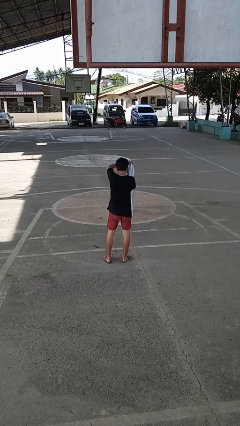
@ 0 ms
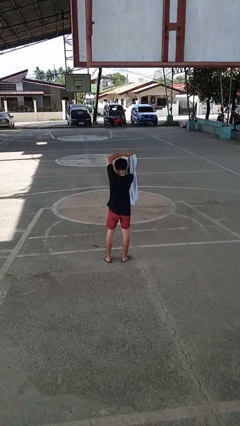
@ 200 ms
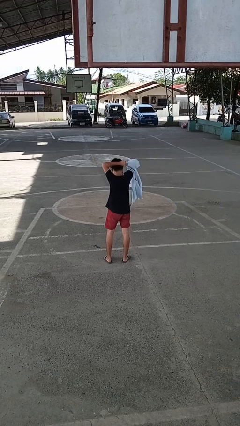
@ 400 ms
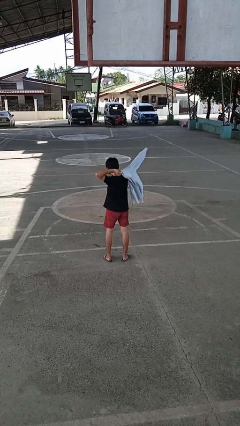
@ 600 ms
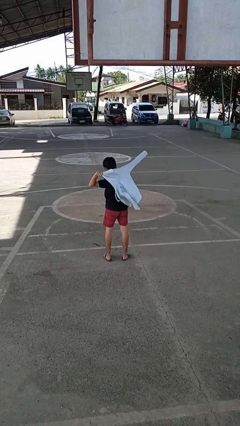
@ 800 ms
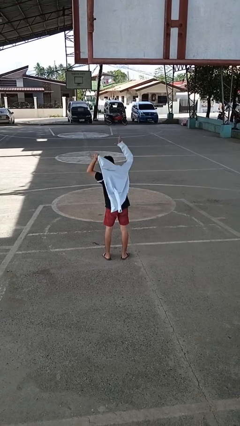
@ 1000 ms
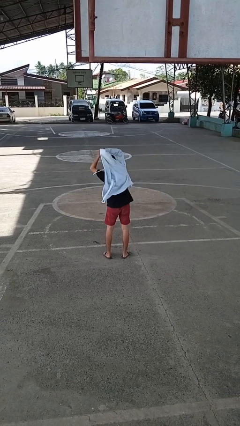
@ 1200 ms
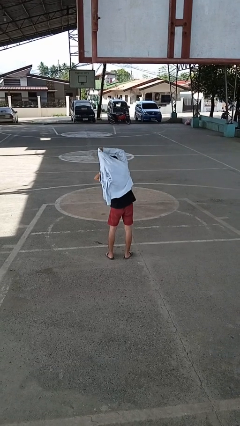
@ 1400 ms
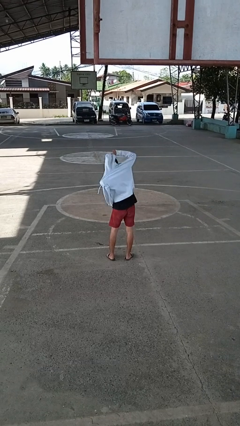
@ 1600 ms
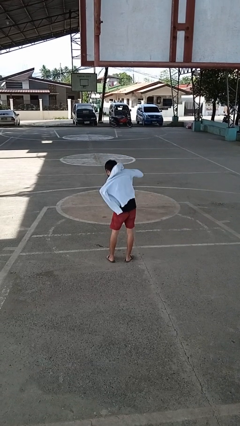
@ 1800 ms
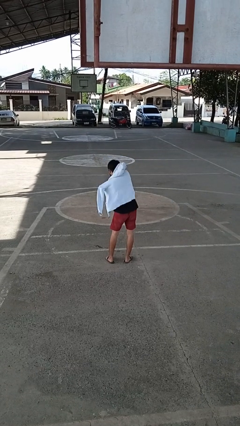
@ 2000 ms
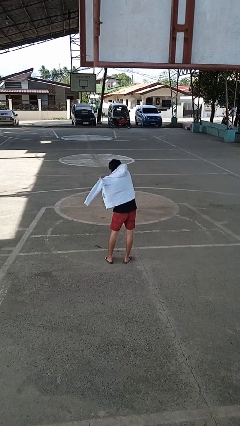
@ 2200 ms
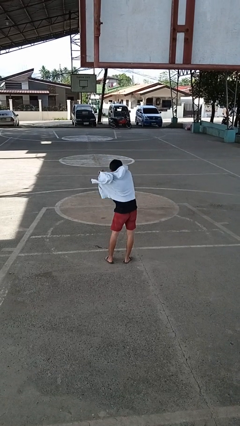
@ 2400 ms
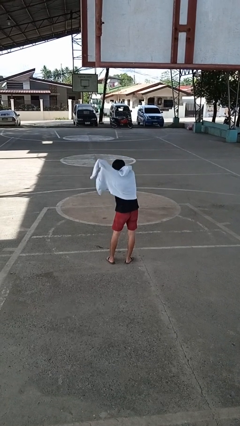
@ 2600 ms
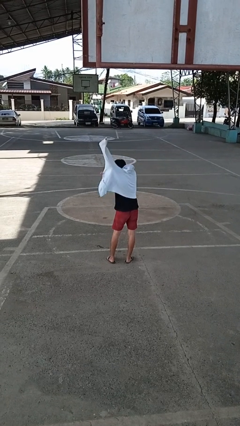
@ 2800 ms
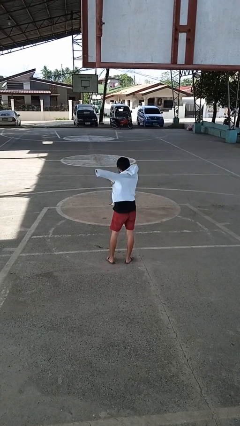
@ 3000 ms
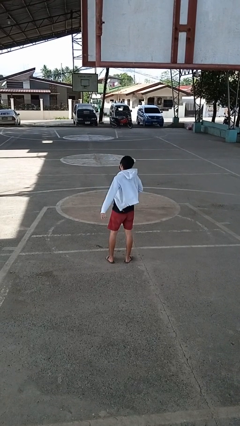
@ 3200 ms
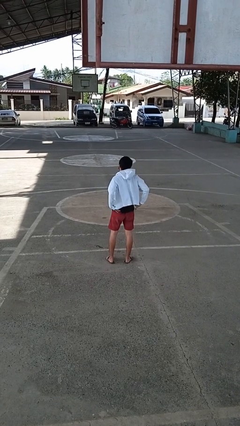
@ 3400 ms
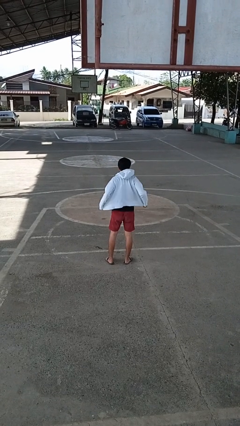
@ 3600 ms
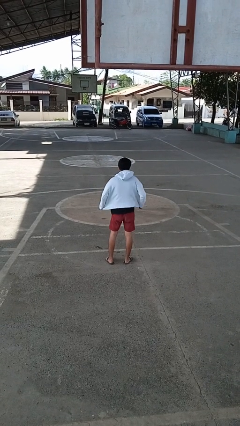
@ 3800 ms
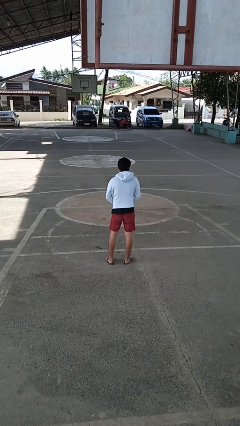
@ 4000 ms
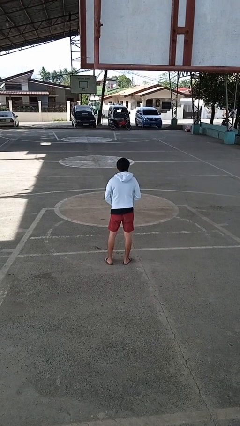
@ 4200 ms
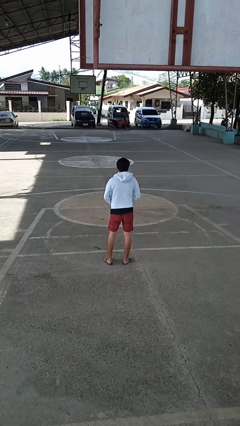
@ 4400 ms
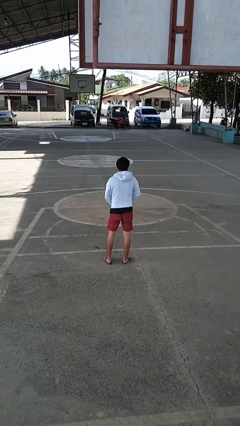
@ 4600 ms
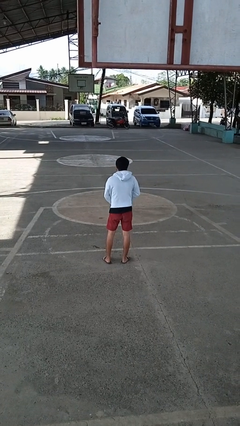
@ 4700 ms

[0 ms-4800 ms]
person puts on jacket

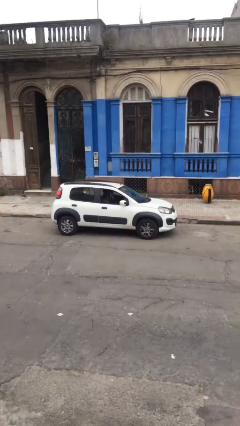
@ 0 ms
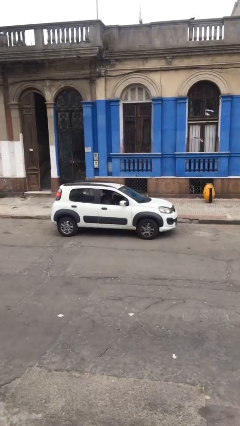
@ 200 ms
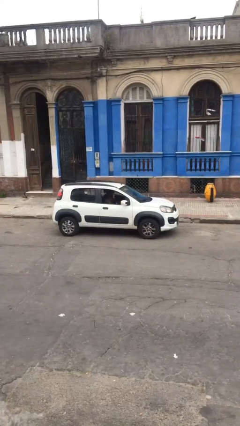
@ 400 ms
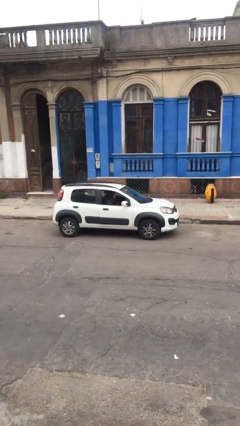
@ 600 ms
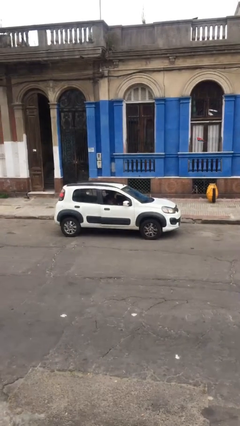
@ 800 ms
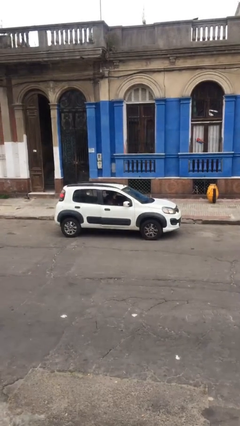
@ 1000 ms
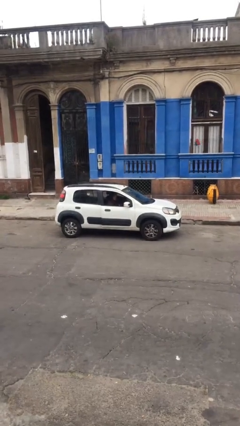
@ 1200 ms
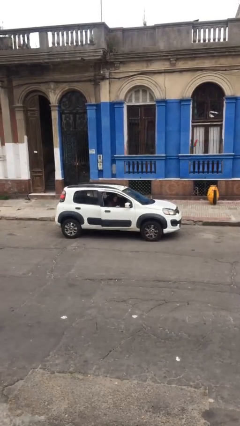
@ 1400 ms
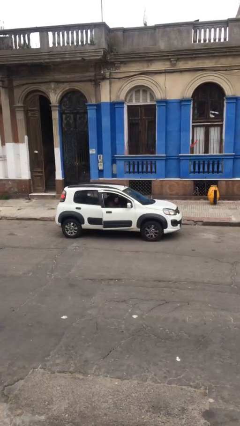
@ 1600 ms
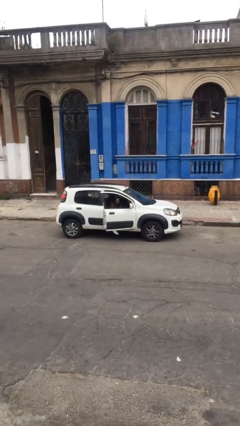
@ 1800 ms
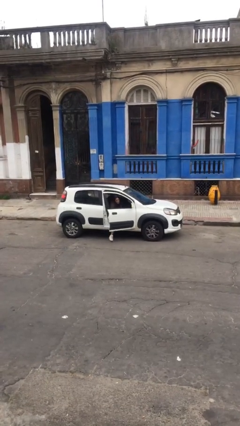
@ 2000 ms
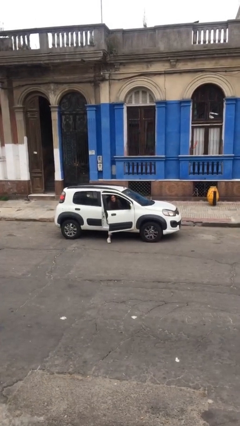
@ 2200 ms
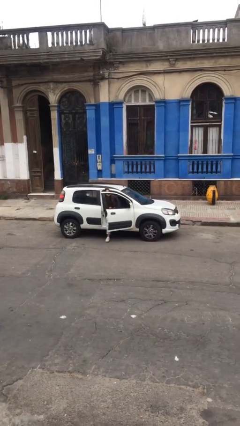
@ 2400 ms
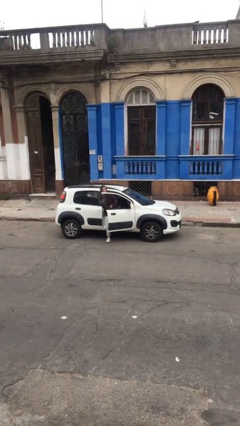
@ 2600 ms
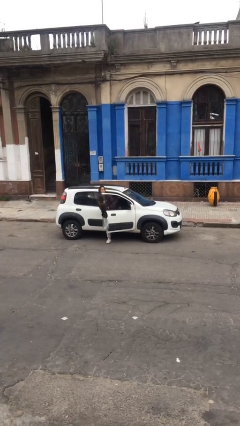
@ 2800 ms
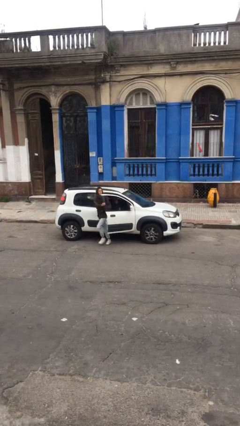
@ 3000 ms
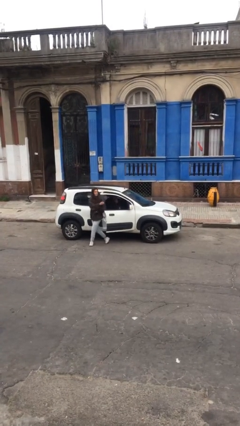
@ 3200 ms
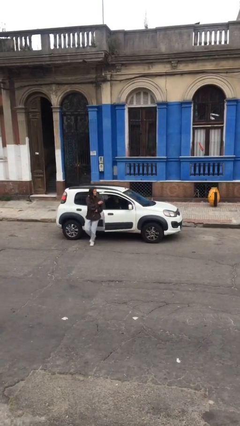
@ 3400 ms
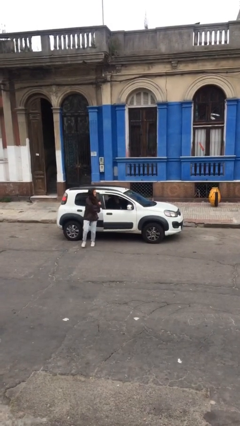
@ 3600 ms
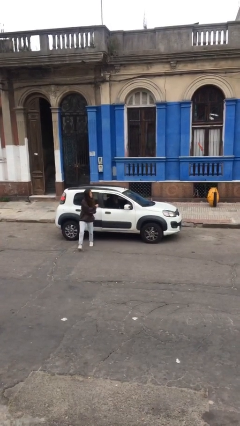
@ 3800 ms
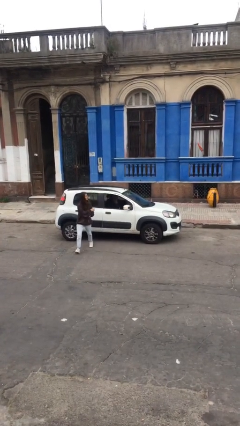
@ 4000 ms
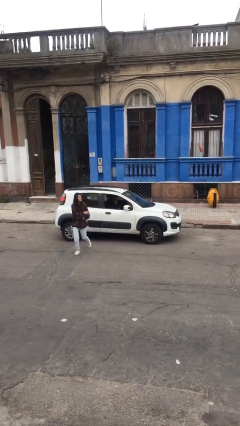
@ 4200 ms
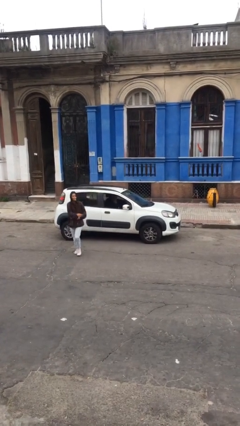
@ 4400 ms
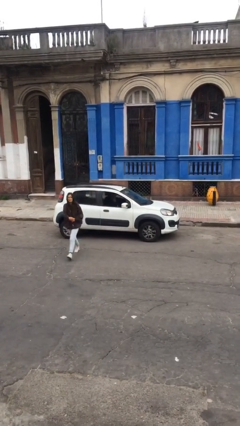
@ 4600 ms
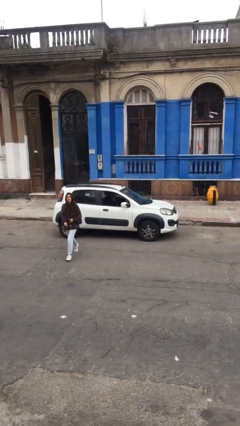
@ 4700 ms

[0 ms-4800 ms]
car drops off person

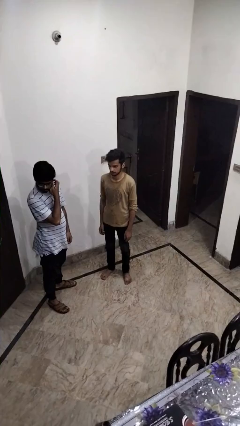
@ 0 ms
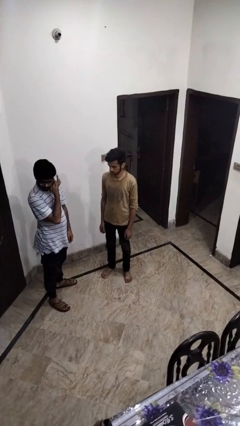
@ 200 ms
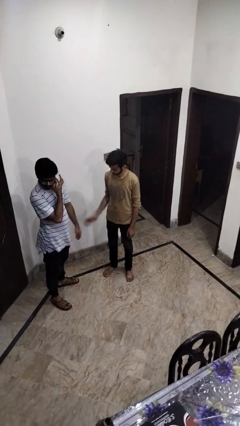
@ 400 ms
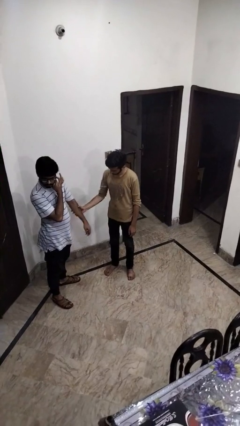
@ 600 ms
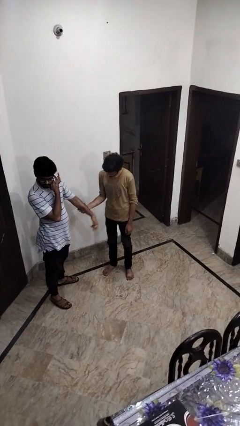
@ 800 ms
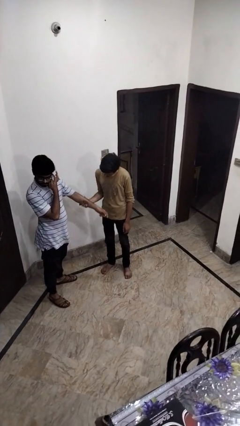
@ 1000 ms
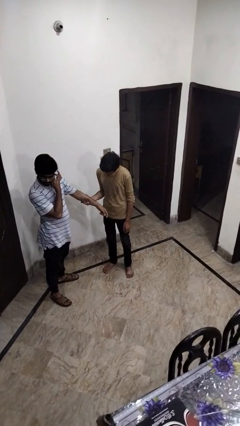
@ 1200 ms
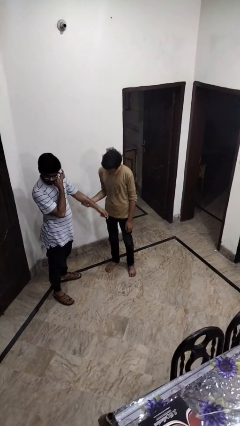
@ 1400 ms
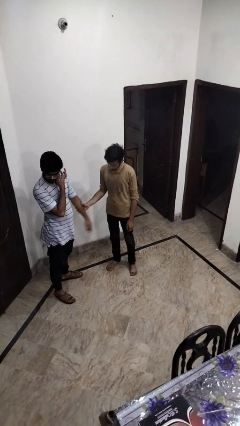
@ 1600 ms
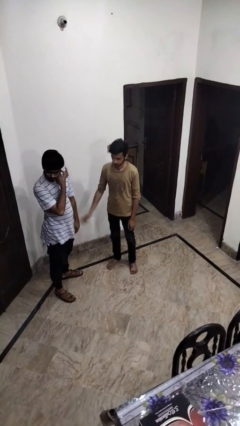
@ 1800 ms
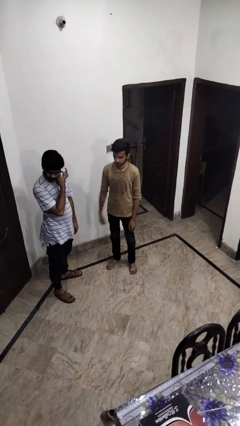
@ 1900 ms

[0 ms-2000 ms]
person grabs person by forearm

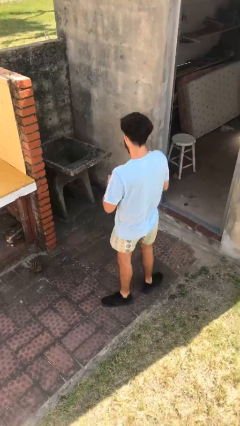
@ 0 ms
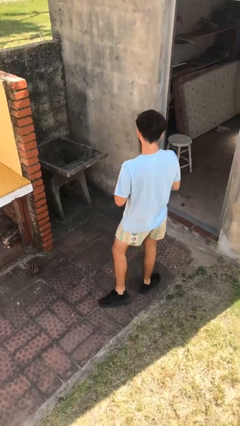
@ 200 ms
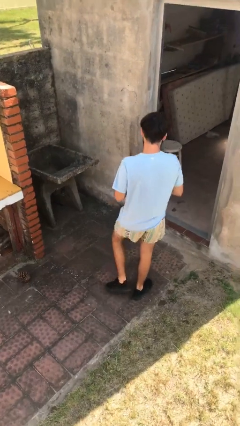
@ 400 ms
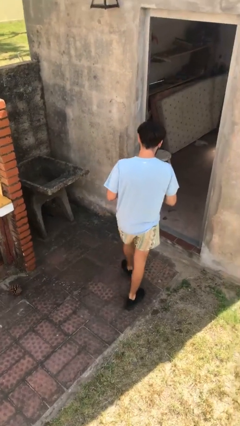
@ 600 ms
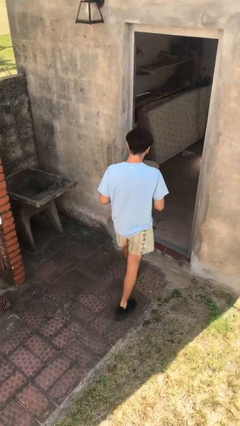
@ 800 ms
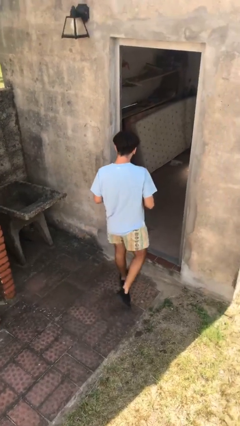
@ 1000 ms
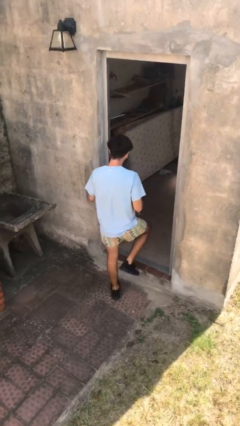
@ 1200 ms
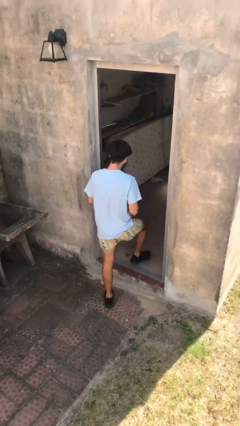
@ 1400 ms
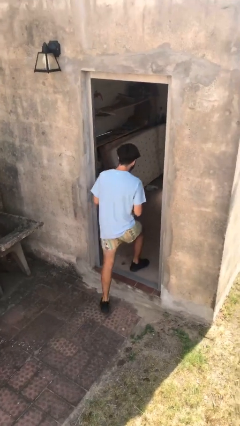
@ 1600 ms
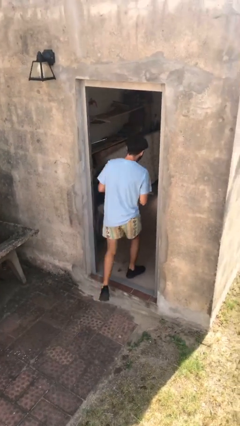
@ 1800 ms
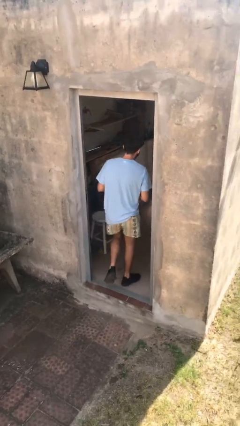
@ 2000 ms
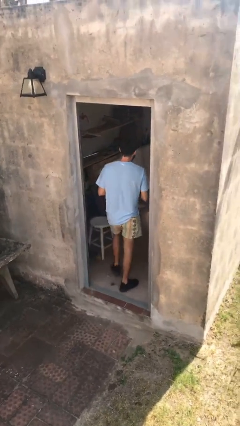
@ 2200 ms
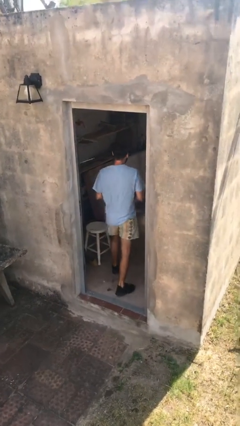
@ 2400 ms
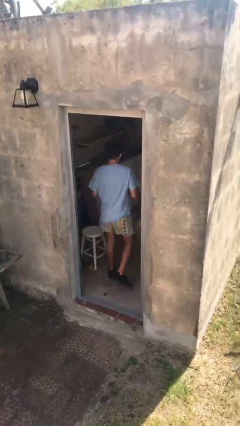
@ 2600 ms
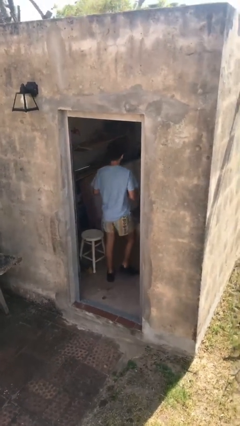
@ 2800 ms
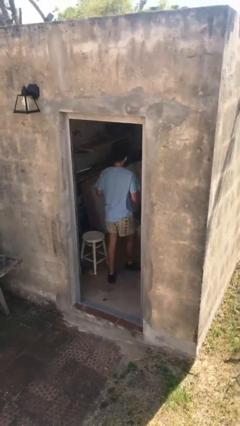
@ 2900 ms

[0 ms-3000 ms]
person exits scene through structure

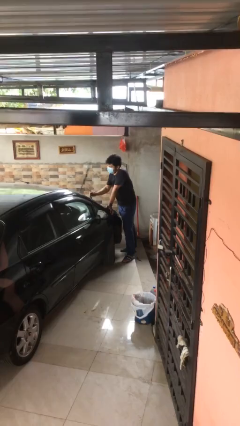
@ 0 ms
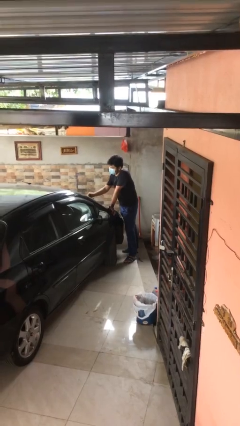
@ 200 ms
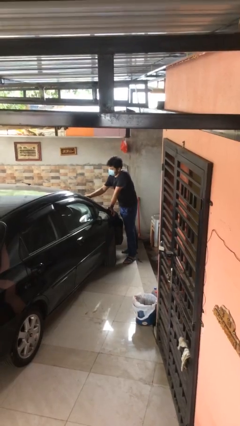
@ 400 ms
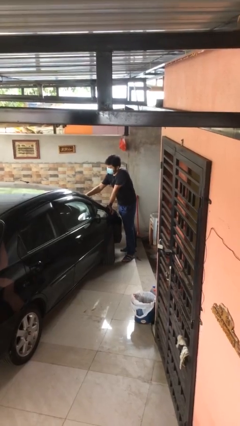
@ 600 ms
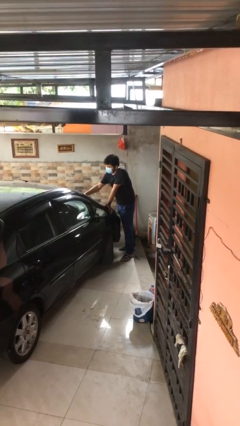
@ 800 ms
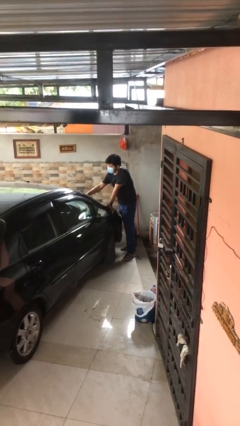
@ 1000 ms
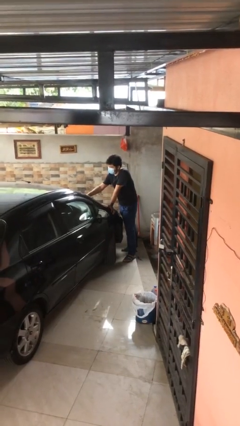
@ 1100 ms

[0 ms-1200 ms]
person flips down car wipers

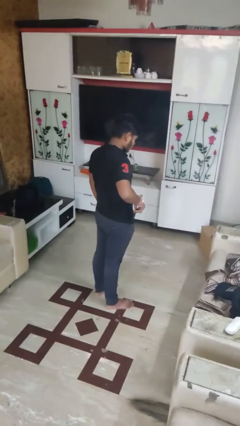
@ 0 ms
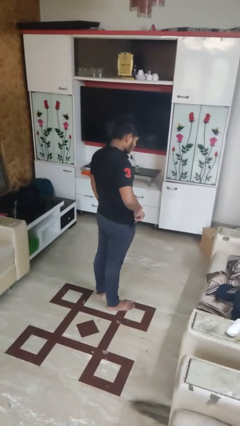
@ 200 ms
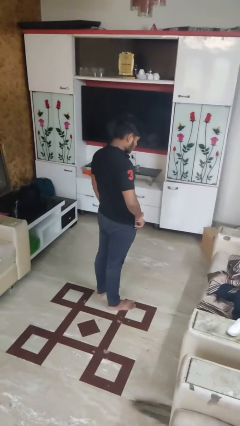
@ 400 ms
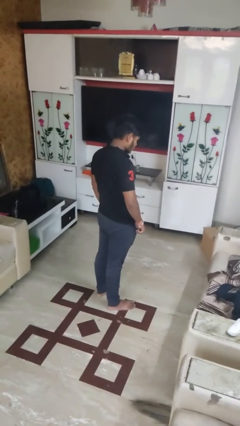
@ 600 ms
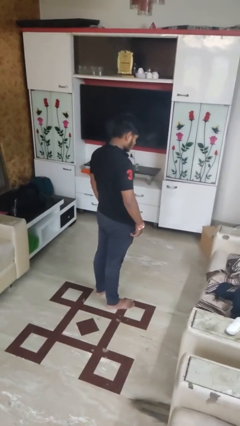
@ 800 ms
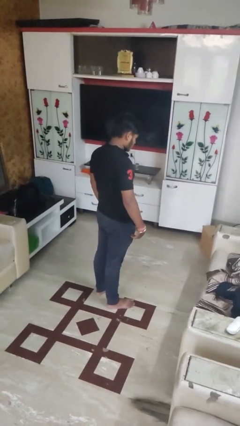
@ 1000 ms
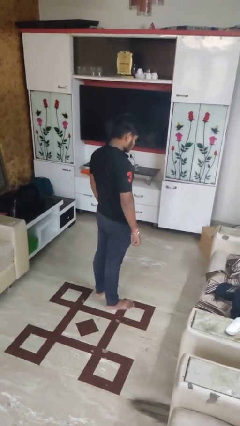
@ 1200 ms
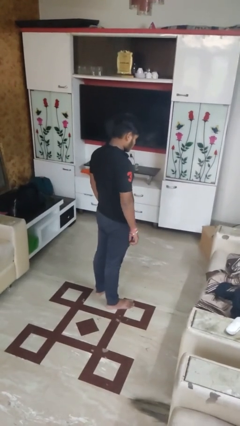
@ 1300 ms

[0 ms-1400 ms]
person puts phone into pocket
